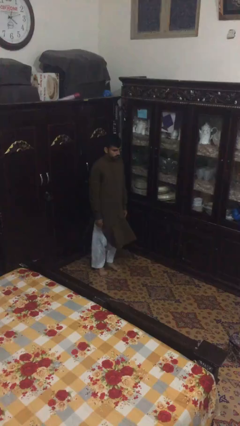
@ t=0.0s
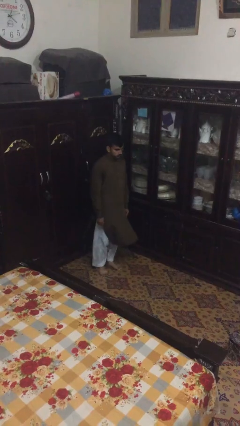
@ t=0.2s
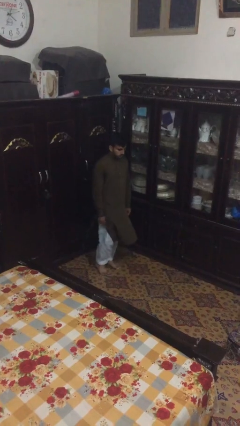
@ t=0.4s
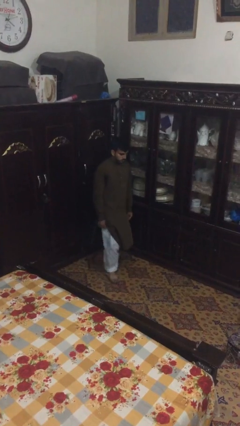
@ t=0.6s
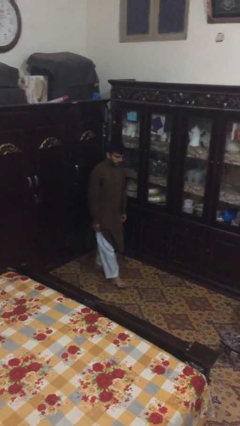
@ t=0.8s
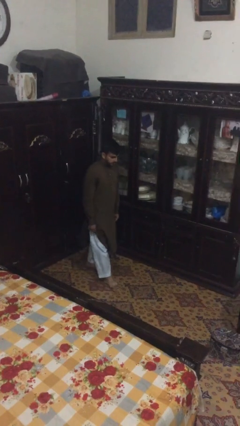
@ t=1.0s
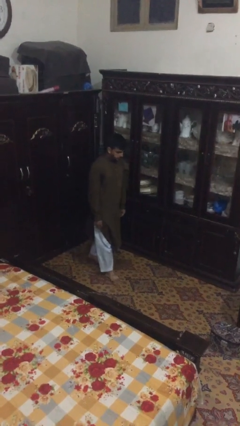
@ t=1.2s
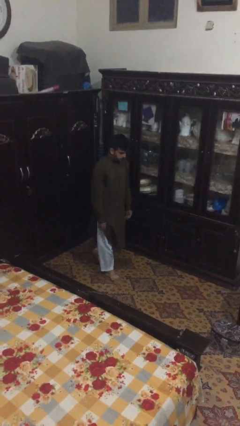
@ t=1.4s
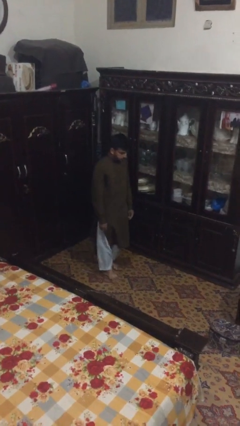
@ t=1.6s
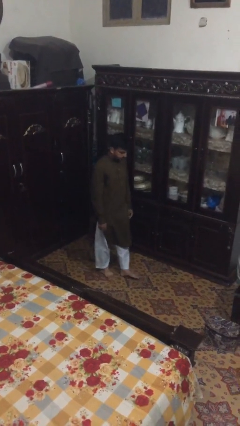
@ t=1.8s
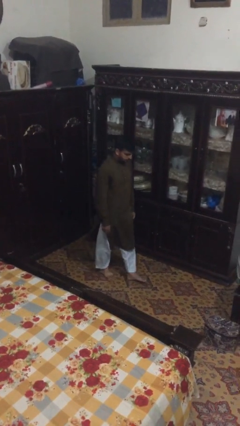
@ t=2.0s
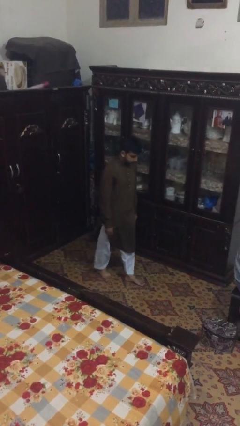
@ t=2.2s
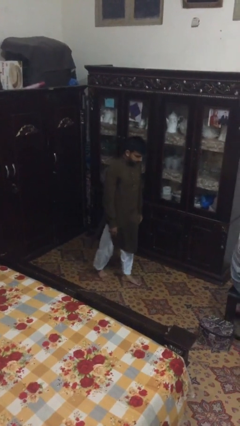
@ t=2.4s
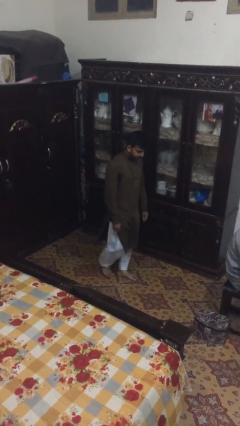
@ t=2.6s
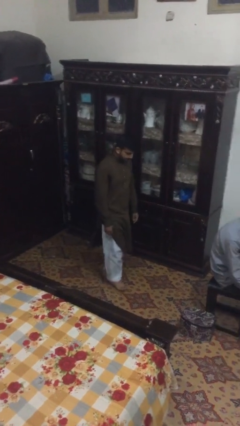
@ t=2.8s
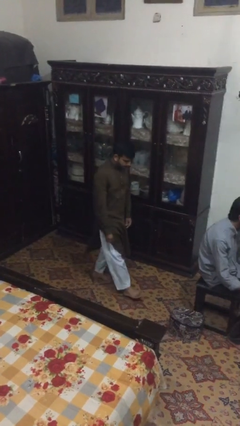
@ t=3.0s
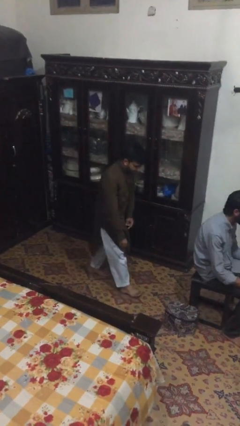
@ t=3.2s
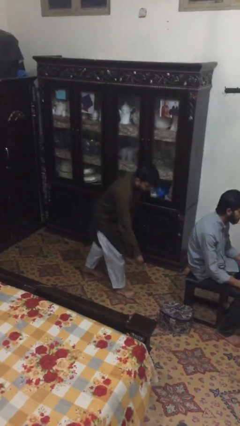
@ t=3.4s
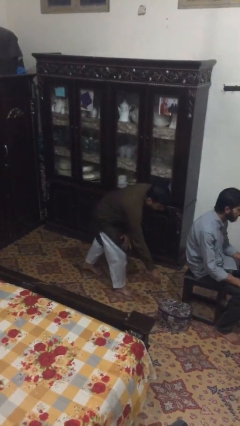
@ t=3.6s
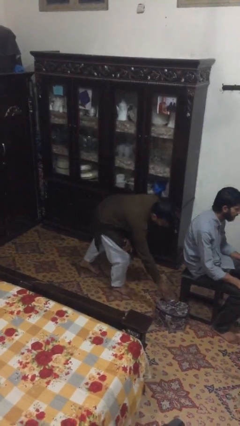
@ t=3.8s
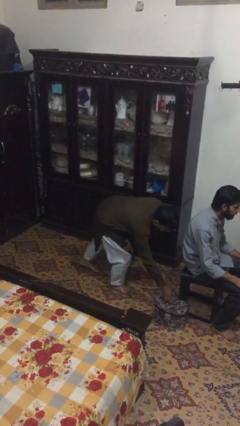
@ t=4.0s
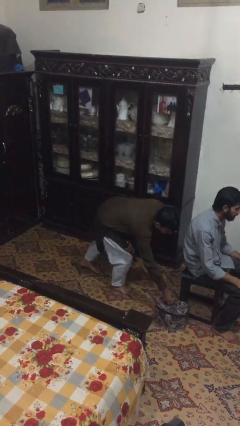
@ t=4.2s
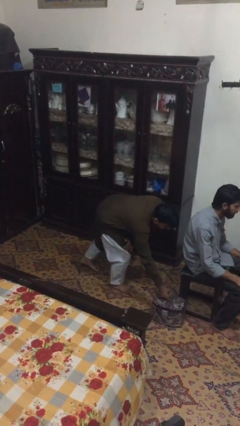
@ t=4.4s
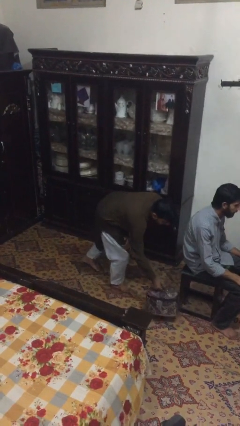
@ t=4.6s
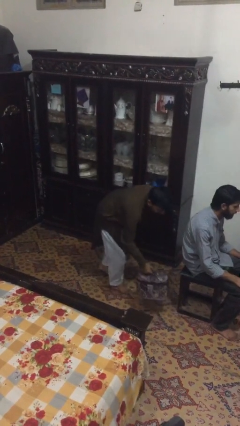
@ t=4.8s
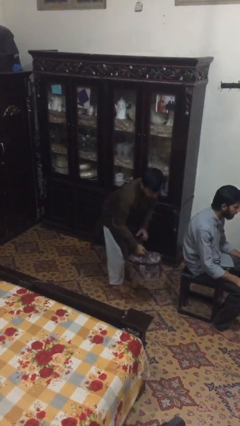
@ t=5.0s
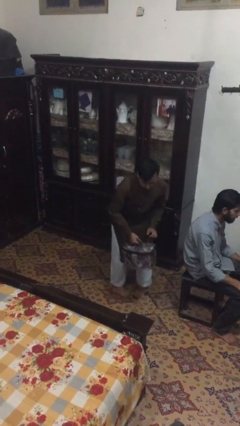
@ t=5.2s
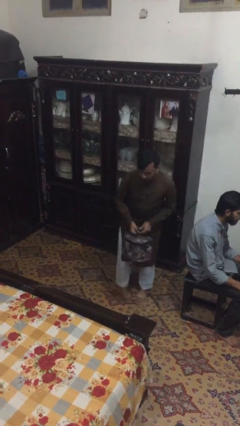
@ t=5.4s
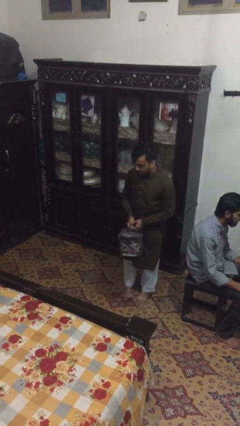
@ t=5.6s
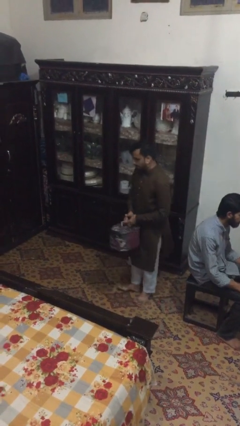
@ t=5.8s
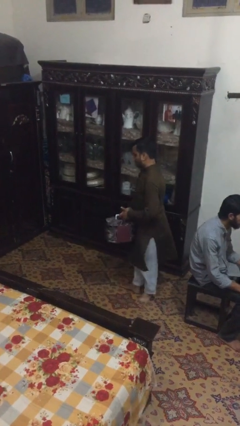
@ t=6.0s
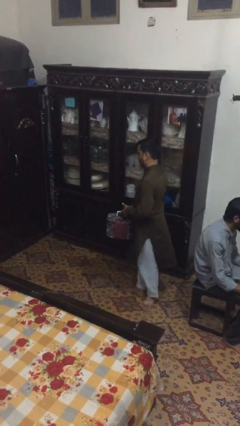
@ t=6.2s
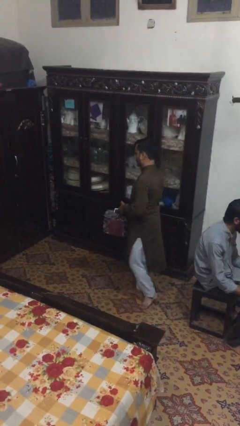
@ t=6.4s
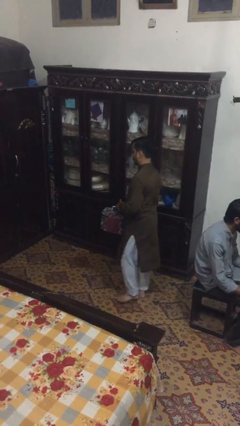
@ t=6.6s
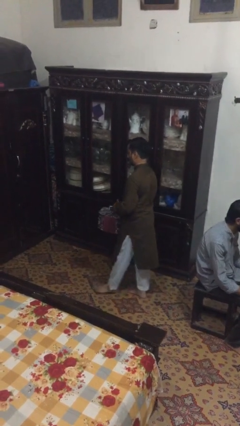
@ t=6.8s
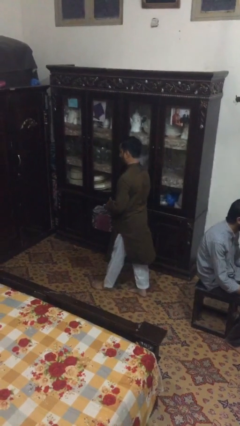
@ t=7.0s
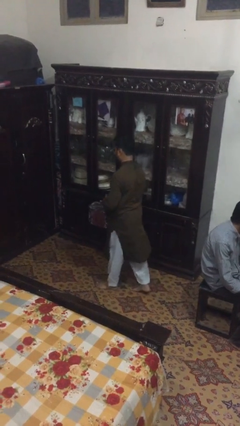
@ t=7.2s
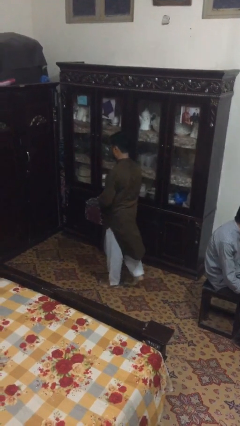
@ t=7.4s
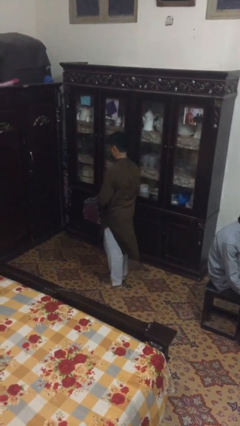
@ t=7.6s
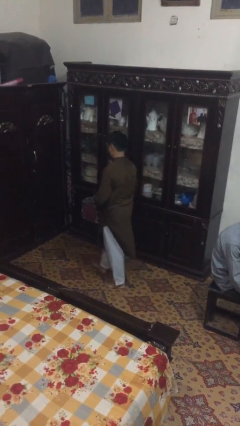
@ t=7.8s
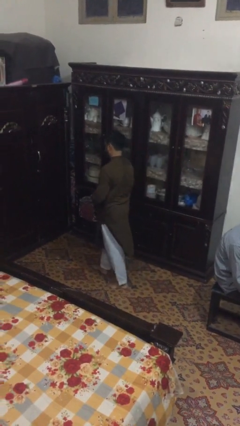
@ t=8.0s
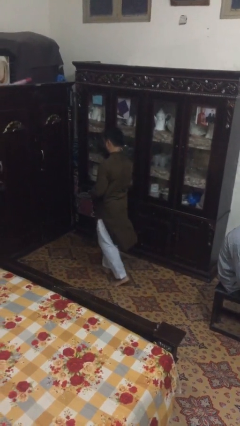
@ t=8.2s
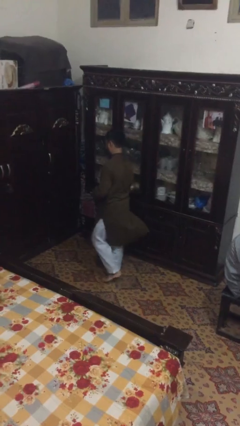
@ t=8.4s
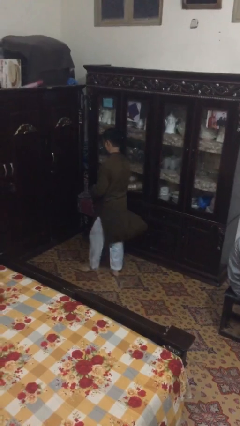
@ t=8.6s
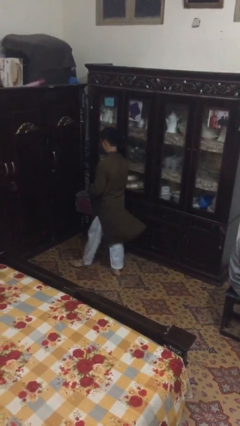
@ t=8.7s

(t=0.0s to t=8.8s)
person steals object from person

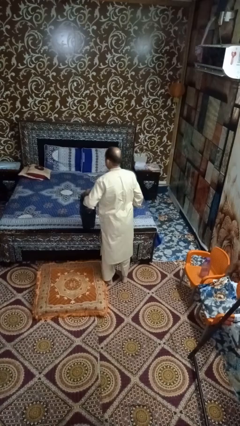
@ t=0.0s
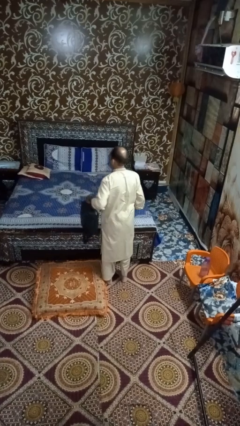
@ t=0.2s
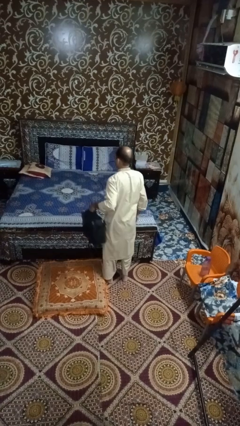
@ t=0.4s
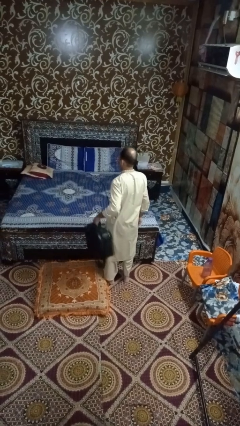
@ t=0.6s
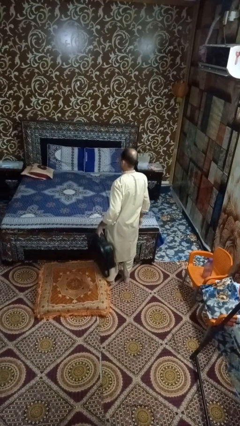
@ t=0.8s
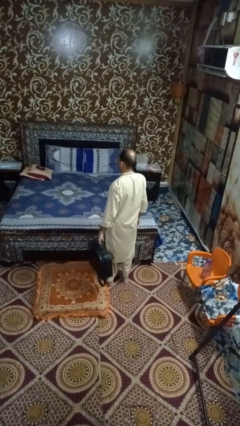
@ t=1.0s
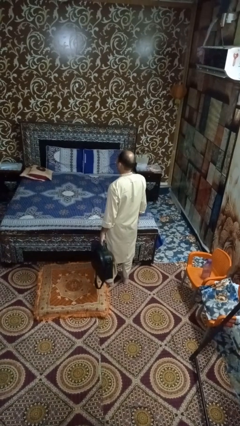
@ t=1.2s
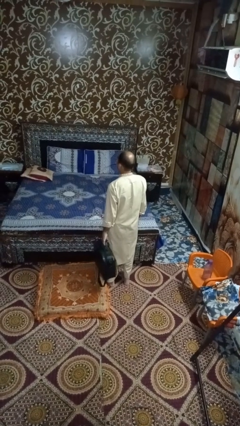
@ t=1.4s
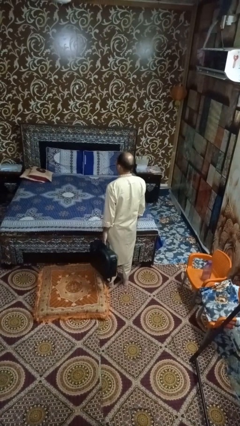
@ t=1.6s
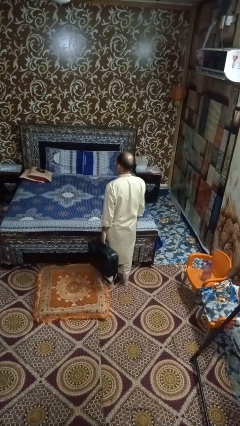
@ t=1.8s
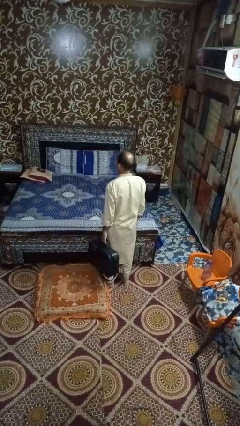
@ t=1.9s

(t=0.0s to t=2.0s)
person puts down object on bed

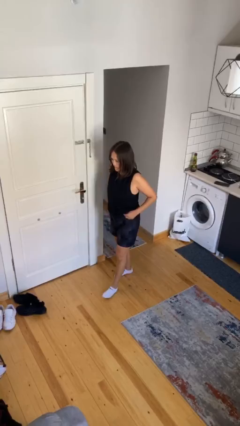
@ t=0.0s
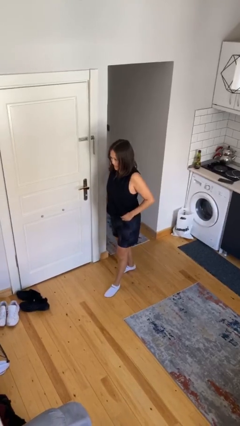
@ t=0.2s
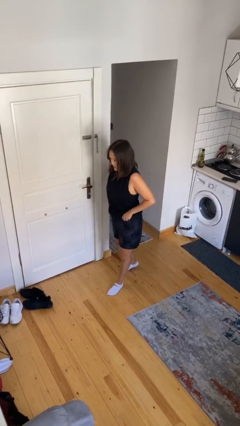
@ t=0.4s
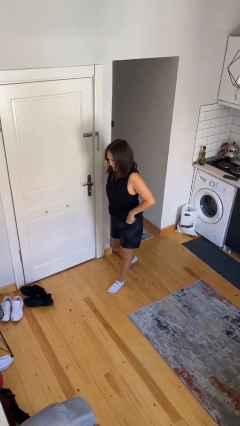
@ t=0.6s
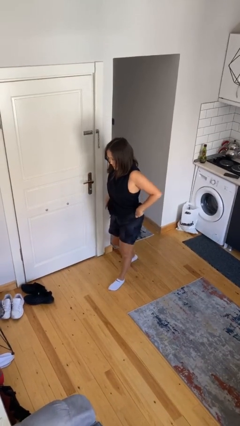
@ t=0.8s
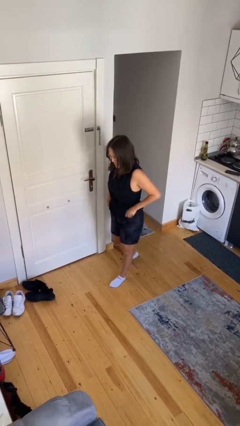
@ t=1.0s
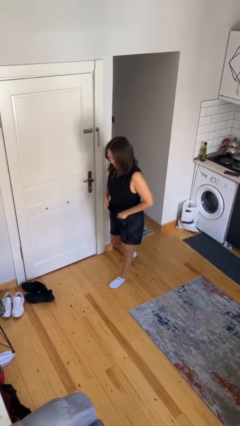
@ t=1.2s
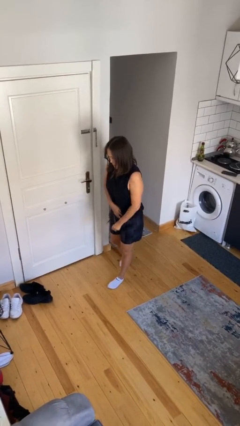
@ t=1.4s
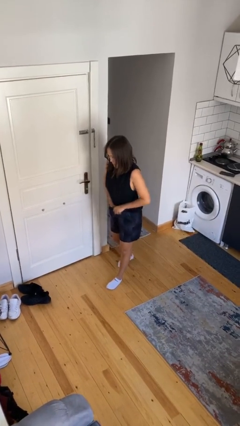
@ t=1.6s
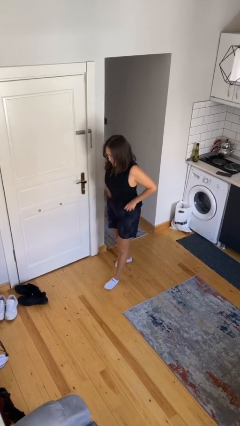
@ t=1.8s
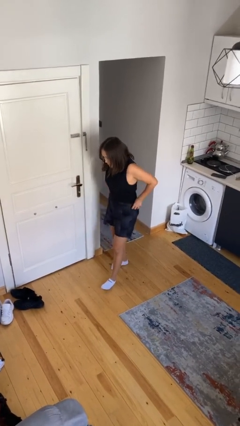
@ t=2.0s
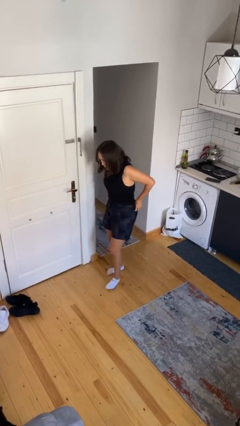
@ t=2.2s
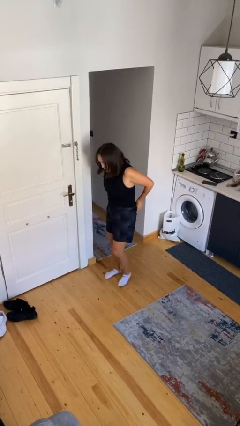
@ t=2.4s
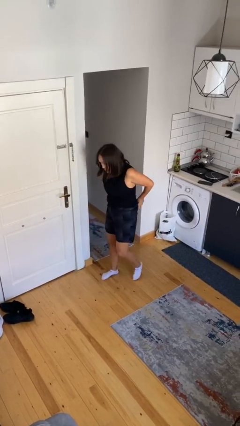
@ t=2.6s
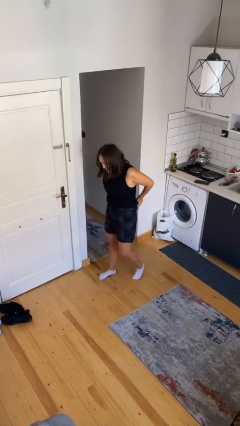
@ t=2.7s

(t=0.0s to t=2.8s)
person tucks in shirt

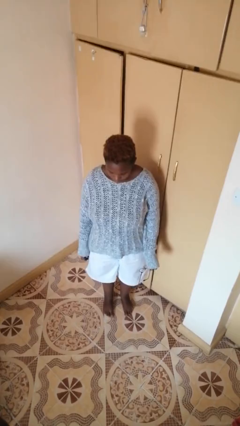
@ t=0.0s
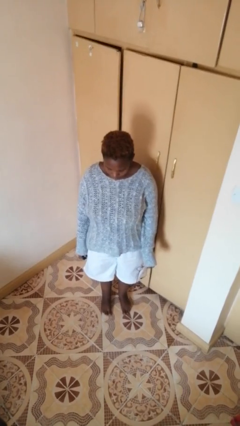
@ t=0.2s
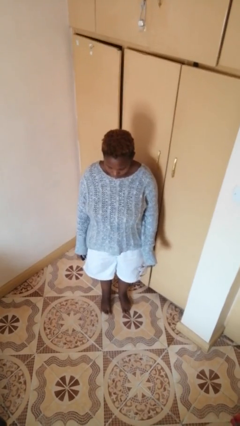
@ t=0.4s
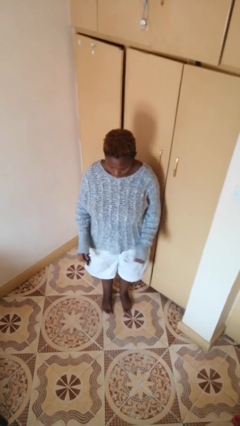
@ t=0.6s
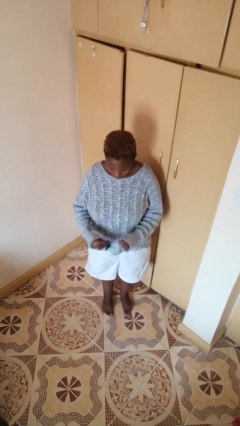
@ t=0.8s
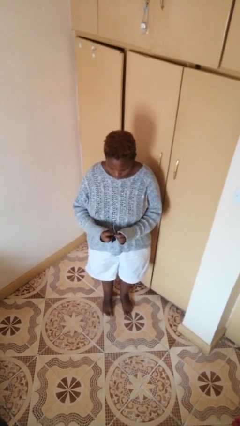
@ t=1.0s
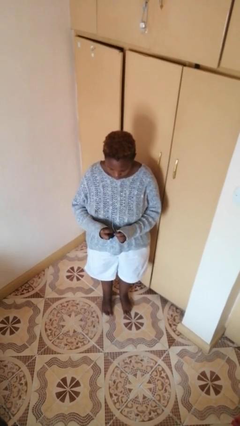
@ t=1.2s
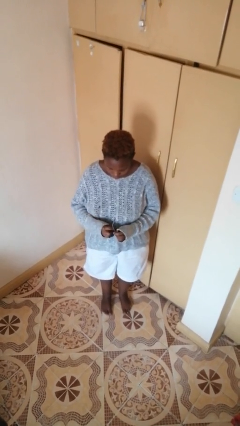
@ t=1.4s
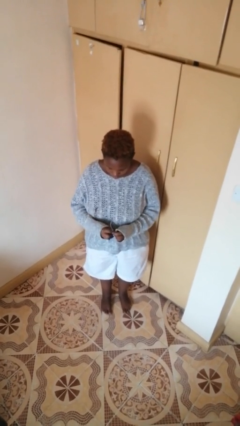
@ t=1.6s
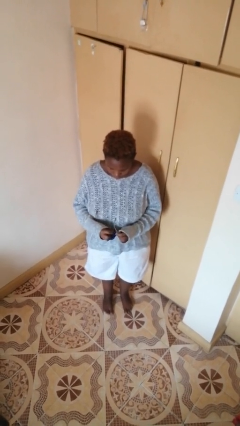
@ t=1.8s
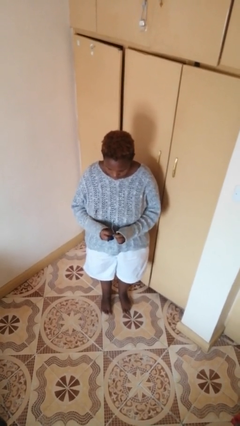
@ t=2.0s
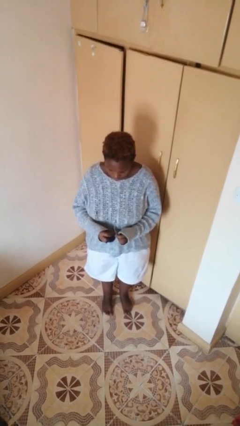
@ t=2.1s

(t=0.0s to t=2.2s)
person cleans eyeglasses

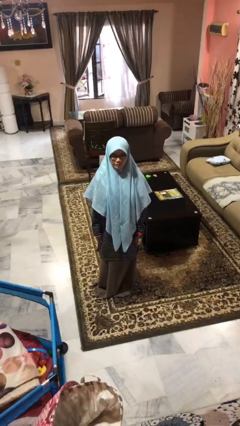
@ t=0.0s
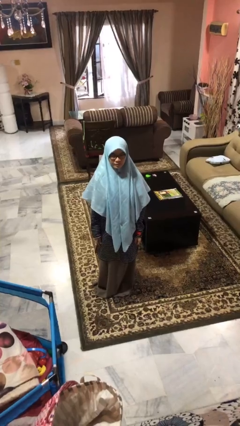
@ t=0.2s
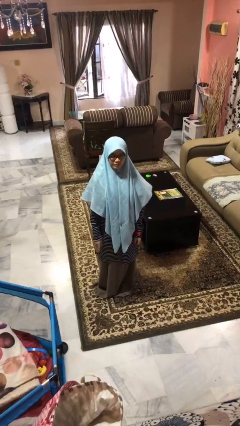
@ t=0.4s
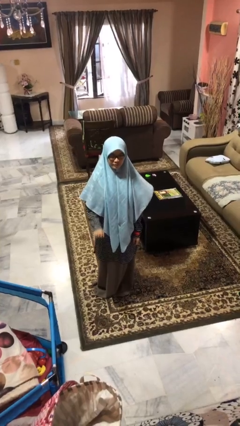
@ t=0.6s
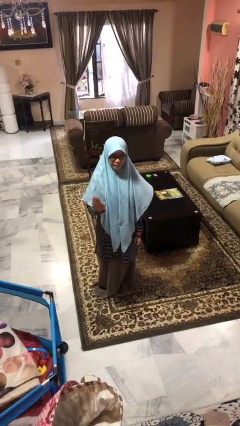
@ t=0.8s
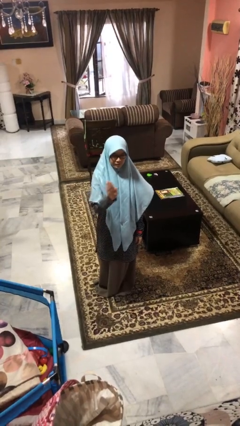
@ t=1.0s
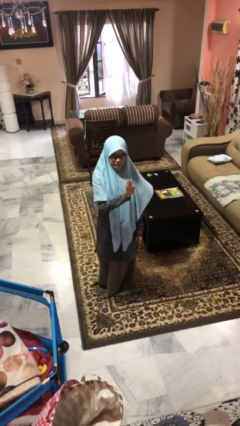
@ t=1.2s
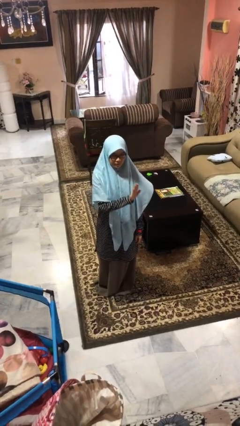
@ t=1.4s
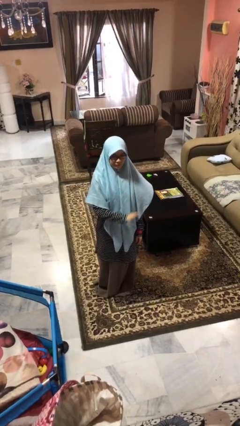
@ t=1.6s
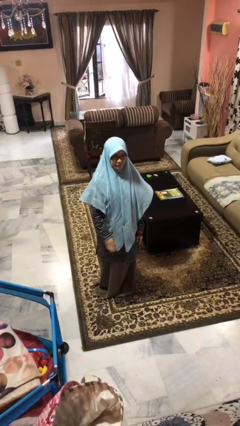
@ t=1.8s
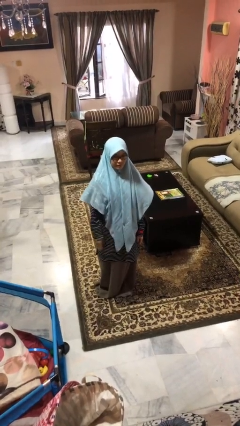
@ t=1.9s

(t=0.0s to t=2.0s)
person gestures swipe left
